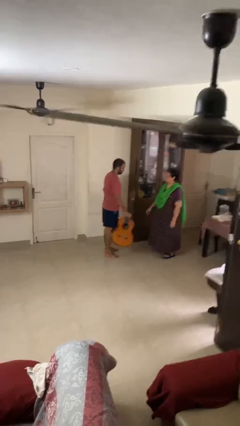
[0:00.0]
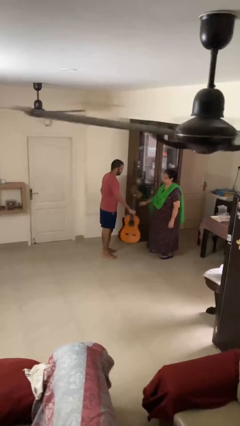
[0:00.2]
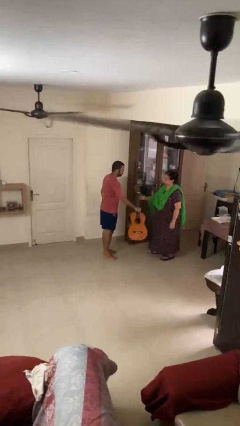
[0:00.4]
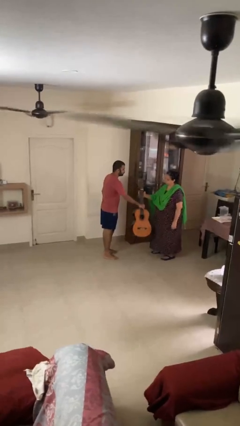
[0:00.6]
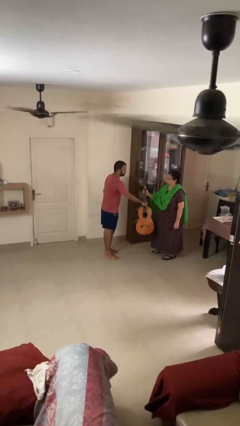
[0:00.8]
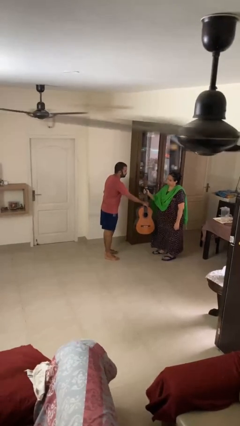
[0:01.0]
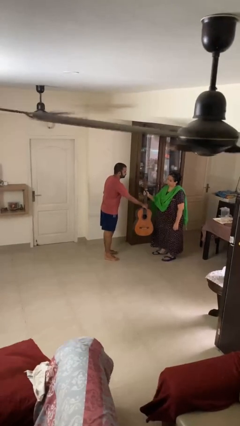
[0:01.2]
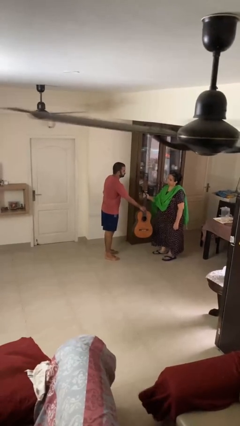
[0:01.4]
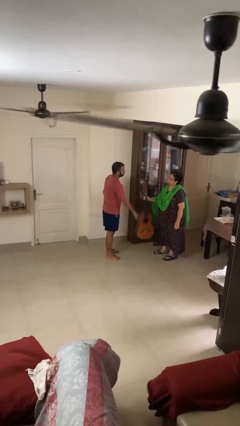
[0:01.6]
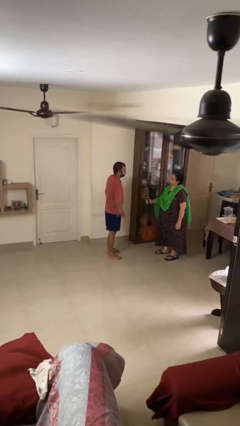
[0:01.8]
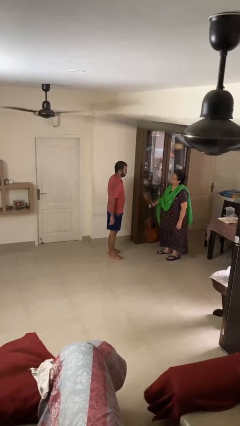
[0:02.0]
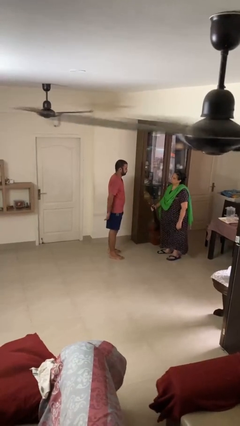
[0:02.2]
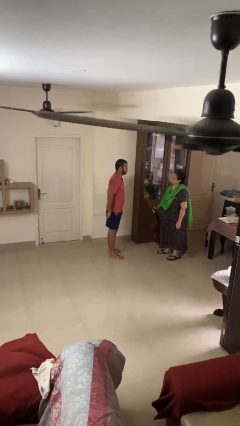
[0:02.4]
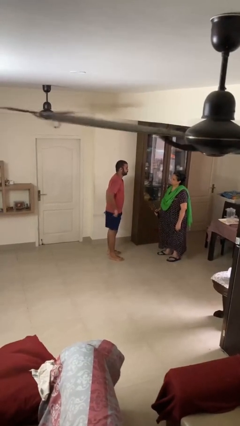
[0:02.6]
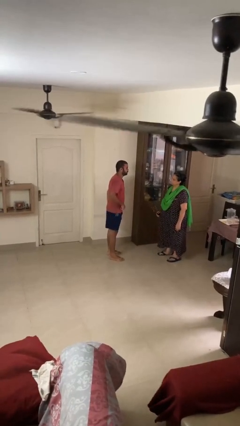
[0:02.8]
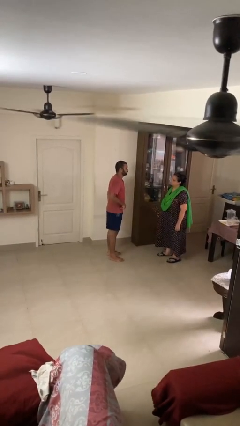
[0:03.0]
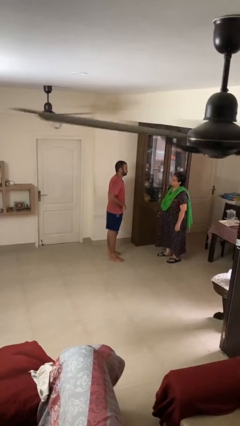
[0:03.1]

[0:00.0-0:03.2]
person transfers object to person

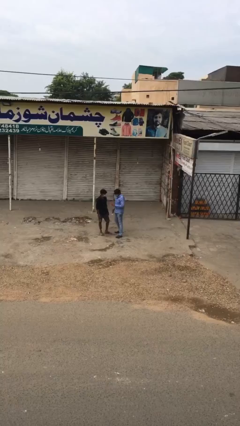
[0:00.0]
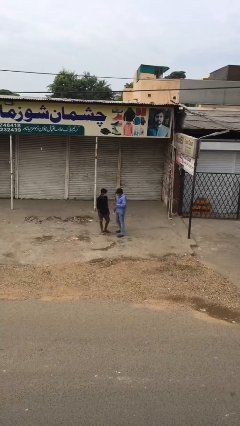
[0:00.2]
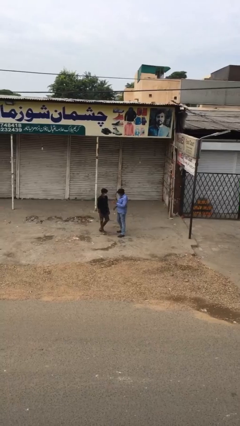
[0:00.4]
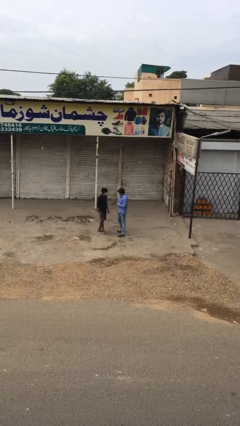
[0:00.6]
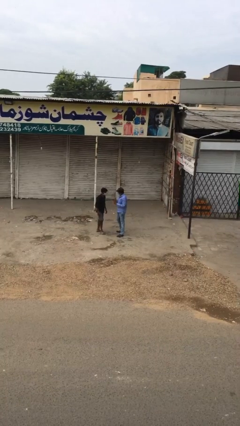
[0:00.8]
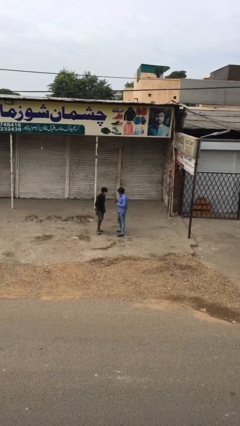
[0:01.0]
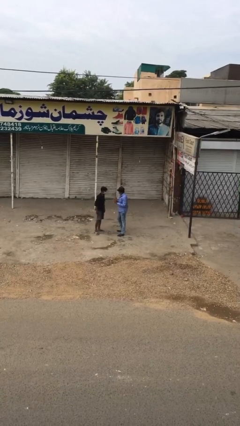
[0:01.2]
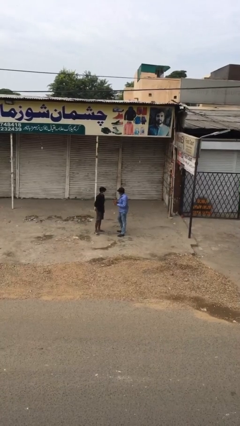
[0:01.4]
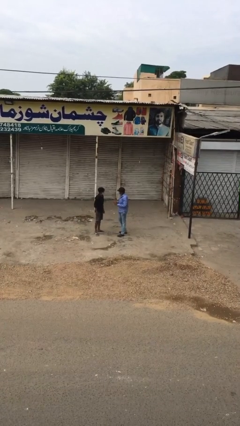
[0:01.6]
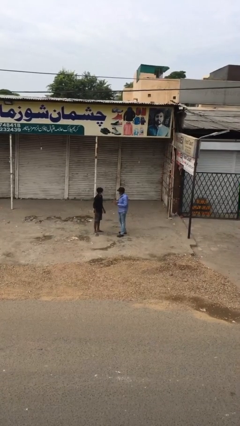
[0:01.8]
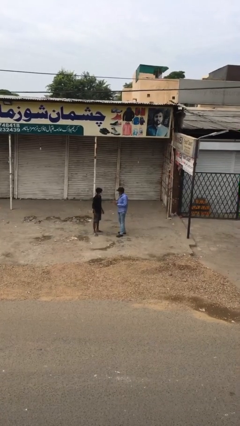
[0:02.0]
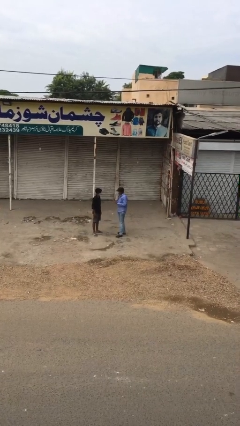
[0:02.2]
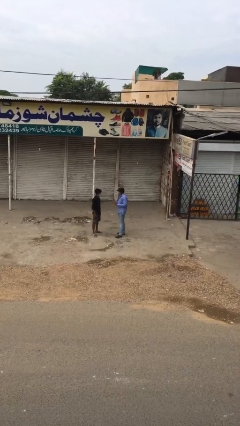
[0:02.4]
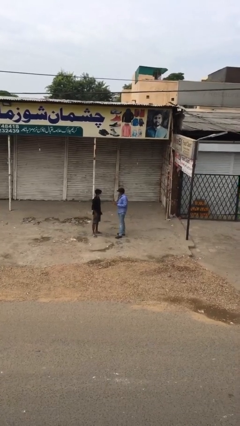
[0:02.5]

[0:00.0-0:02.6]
person talks to person

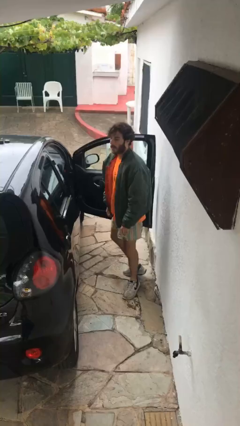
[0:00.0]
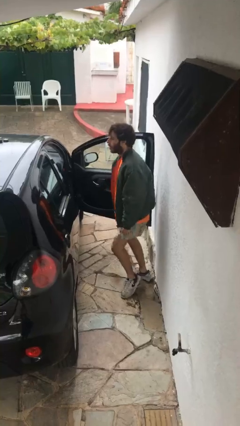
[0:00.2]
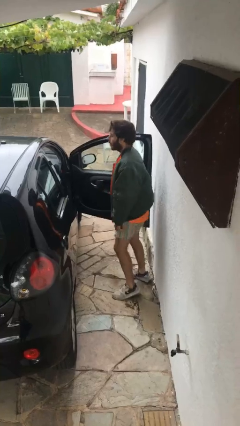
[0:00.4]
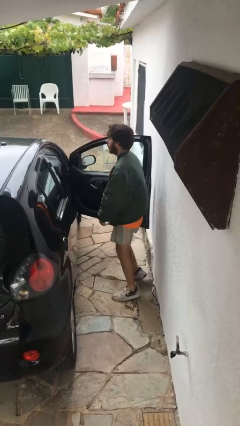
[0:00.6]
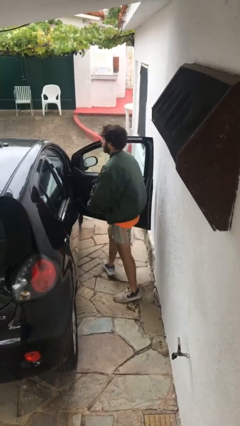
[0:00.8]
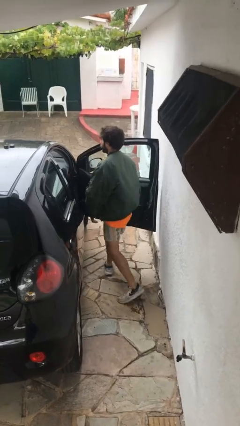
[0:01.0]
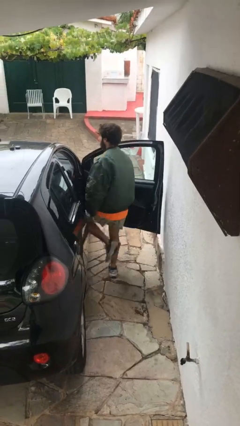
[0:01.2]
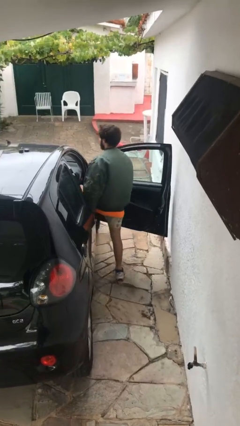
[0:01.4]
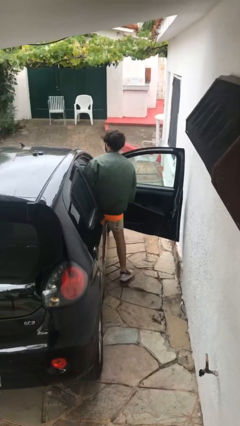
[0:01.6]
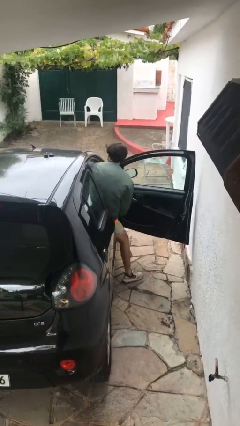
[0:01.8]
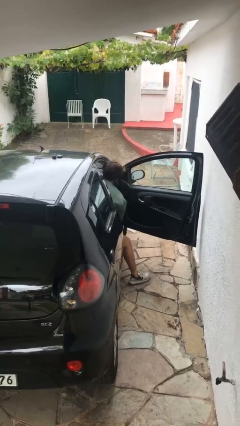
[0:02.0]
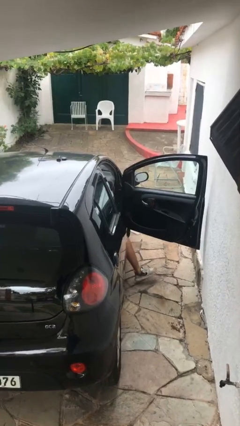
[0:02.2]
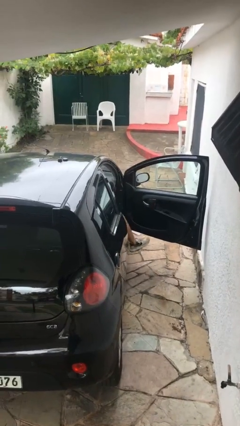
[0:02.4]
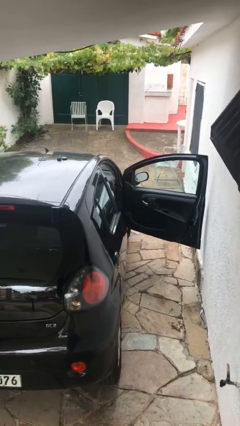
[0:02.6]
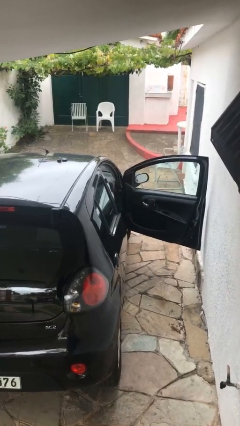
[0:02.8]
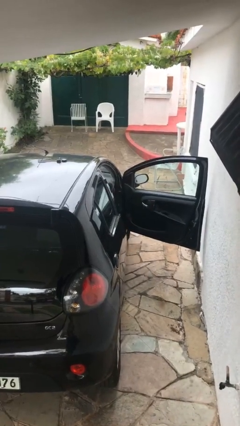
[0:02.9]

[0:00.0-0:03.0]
person enters car

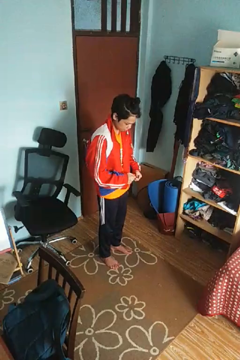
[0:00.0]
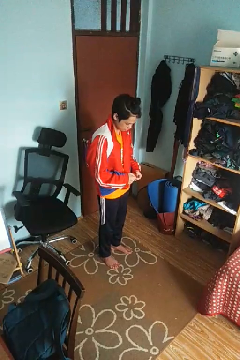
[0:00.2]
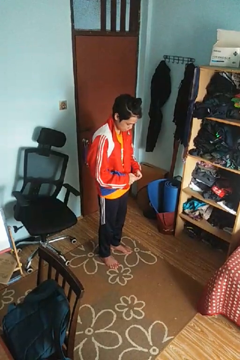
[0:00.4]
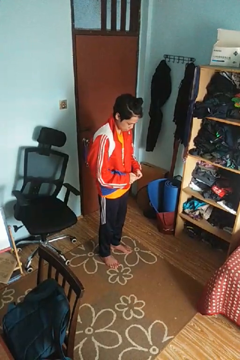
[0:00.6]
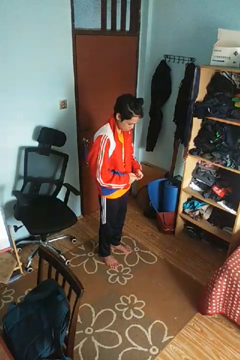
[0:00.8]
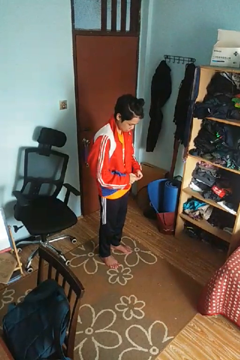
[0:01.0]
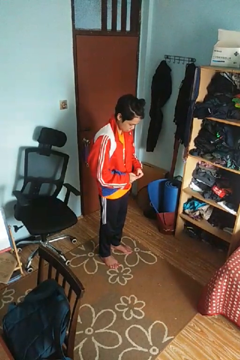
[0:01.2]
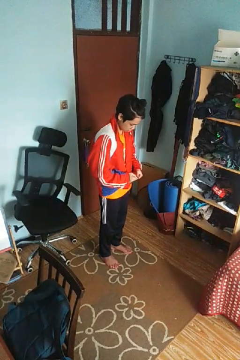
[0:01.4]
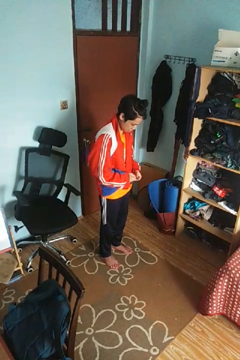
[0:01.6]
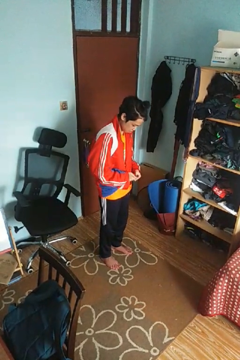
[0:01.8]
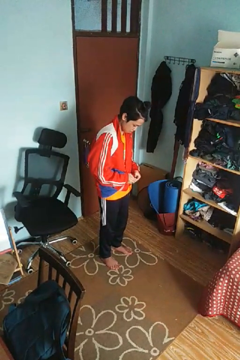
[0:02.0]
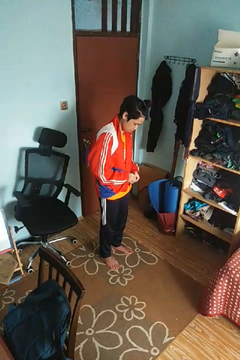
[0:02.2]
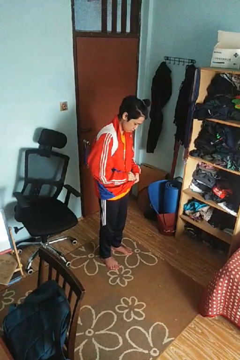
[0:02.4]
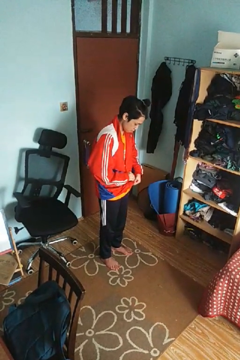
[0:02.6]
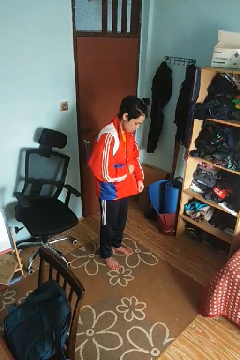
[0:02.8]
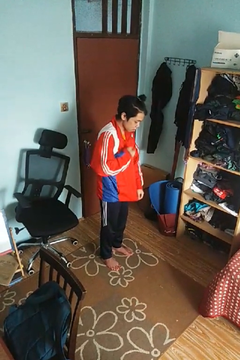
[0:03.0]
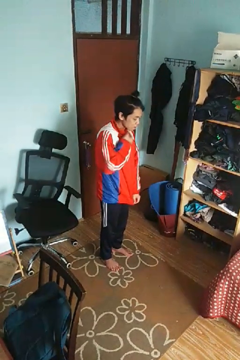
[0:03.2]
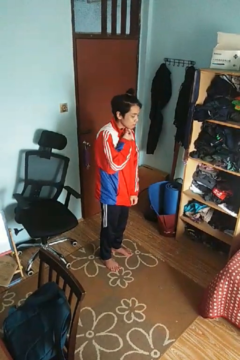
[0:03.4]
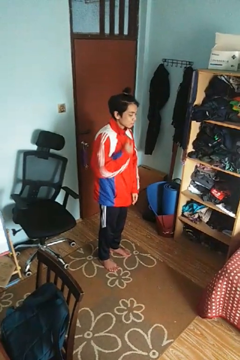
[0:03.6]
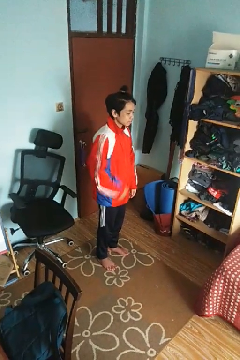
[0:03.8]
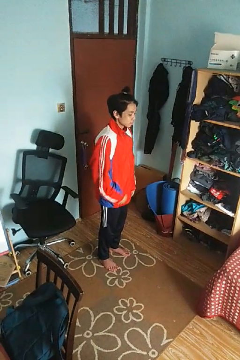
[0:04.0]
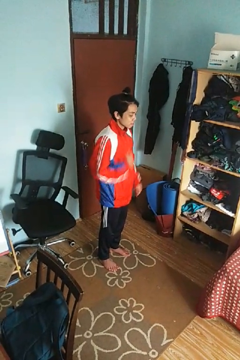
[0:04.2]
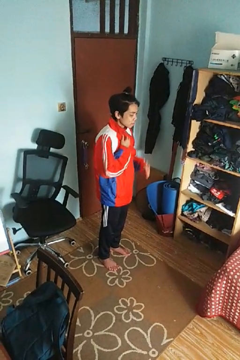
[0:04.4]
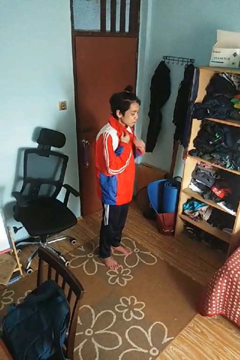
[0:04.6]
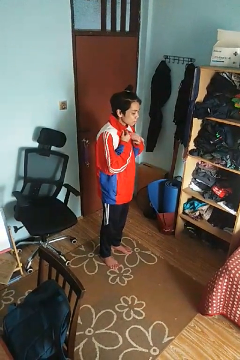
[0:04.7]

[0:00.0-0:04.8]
person zips up jacket

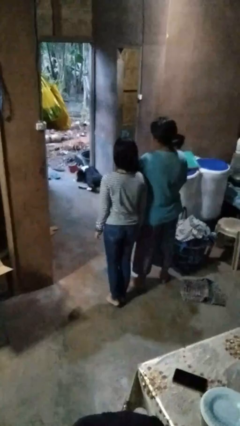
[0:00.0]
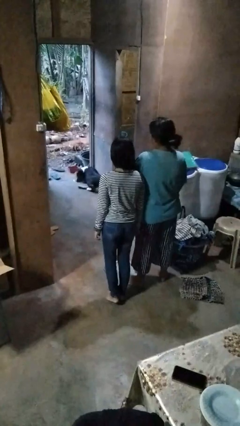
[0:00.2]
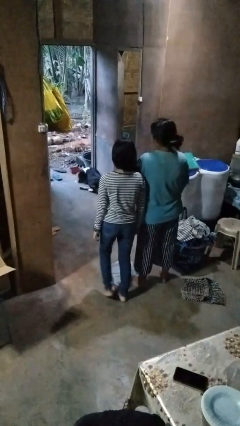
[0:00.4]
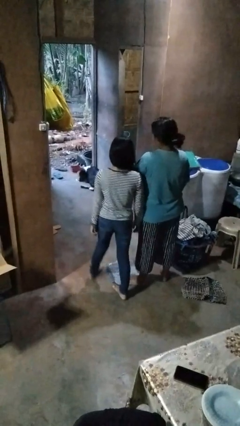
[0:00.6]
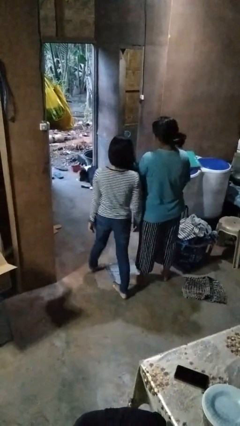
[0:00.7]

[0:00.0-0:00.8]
person bumps into person

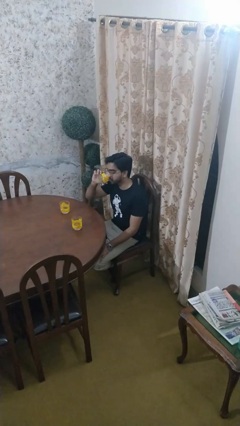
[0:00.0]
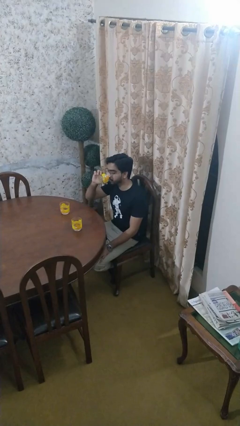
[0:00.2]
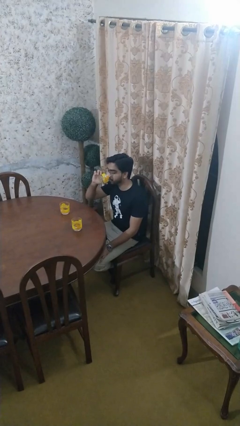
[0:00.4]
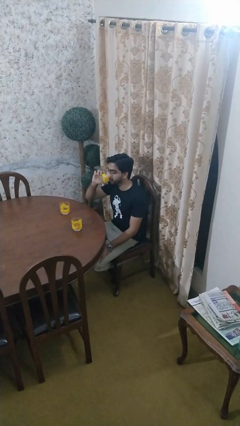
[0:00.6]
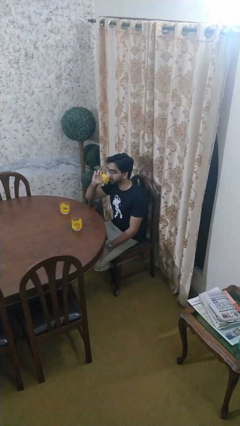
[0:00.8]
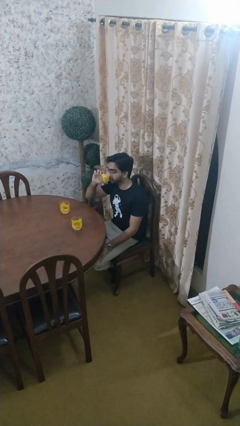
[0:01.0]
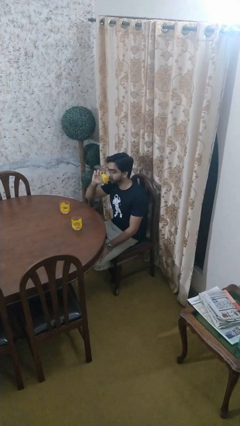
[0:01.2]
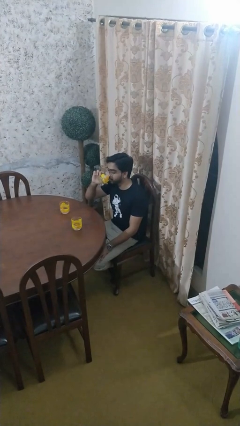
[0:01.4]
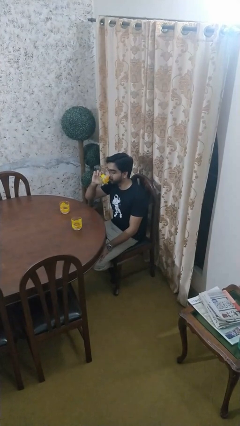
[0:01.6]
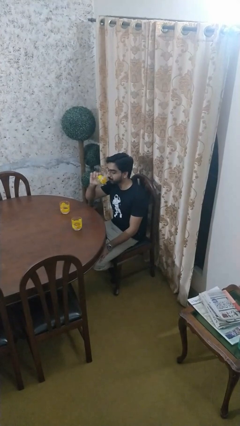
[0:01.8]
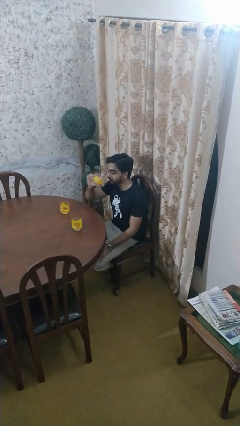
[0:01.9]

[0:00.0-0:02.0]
person drinks from shotglass

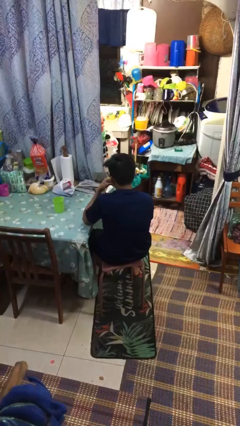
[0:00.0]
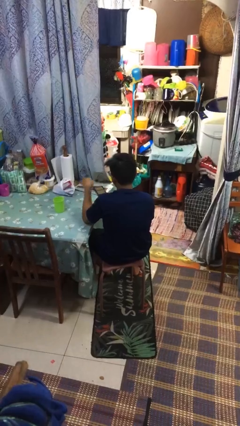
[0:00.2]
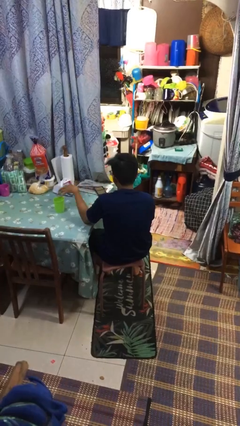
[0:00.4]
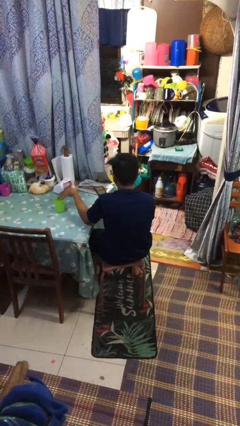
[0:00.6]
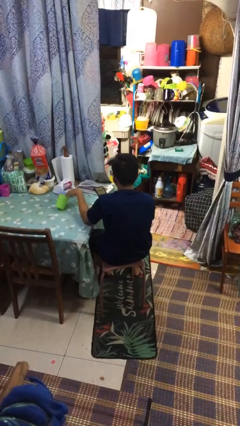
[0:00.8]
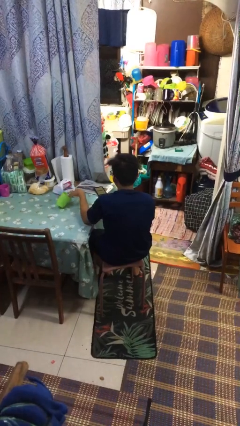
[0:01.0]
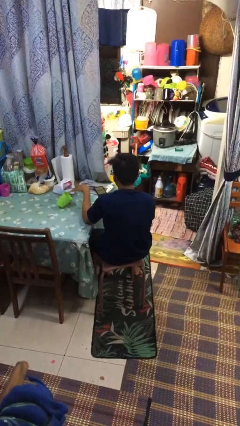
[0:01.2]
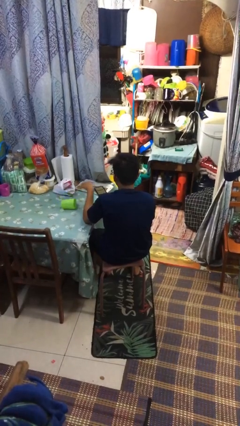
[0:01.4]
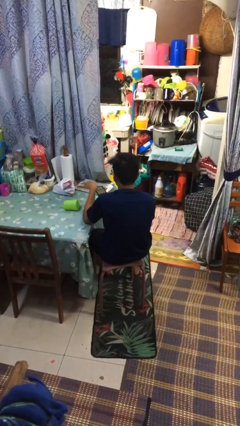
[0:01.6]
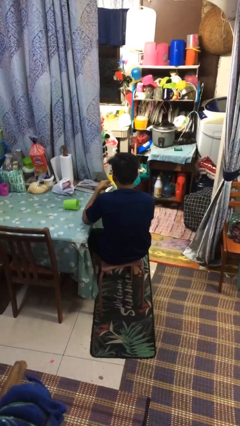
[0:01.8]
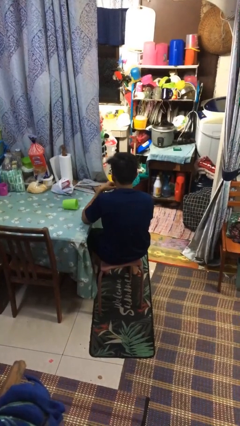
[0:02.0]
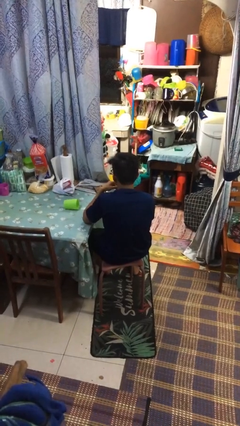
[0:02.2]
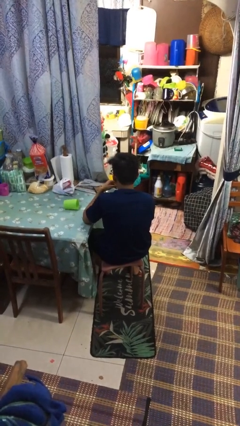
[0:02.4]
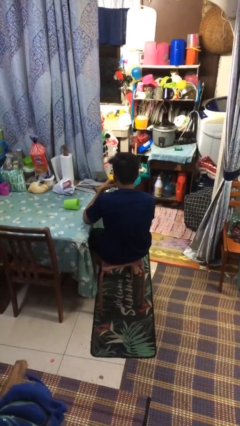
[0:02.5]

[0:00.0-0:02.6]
person knocks over glass
